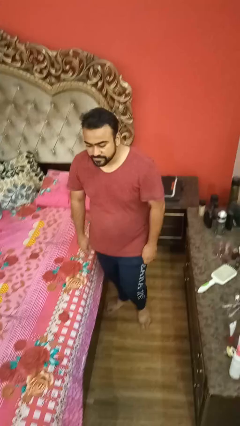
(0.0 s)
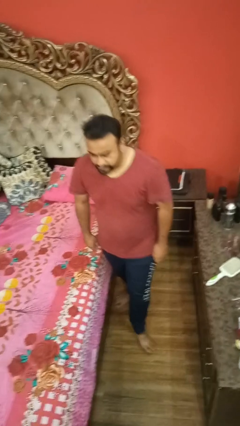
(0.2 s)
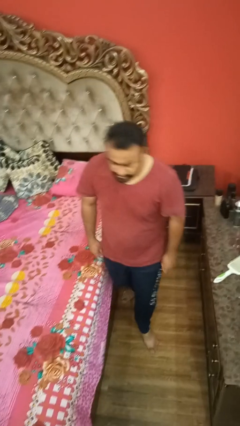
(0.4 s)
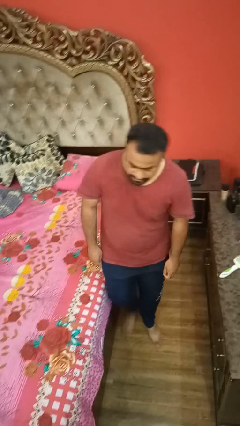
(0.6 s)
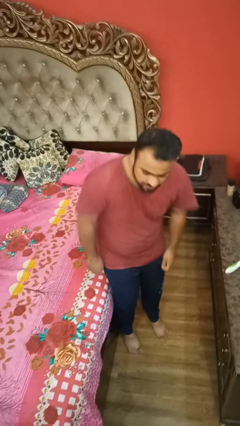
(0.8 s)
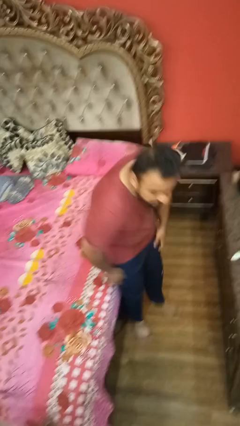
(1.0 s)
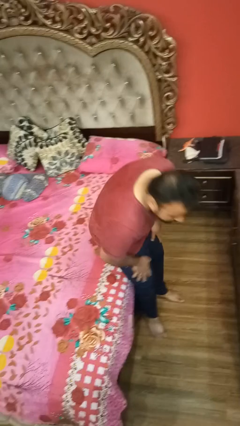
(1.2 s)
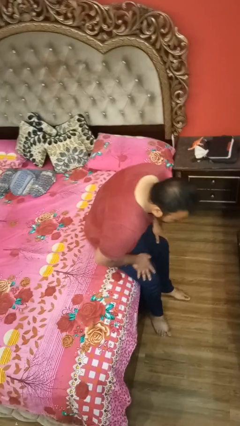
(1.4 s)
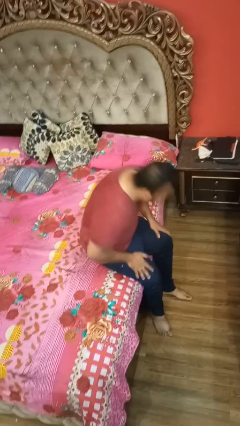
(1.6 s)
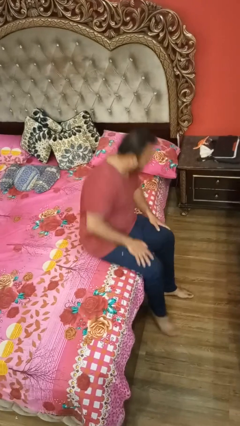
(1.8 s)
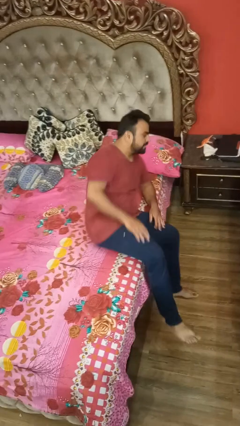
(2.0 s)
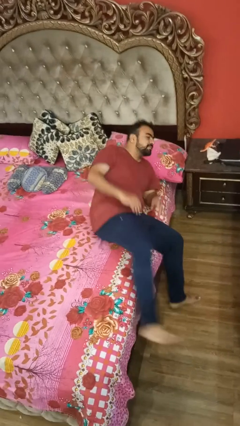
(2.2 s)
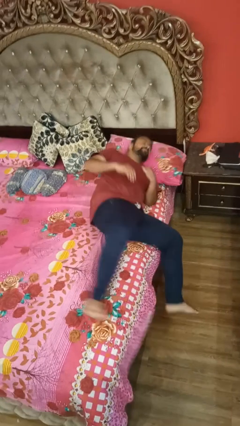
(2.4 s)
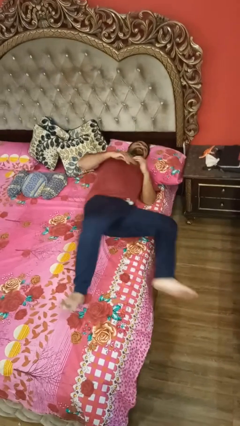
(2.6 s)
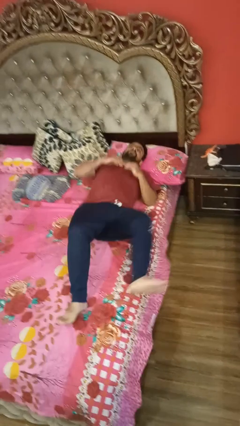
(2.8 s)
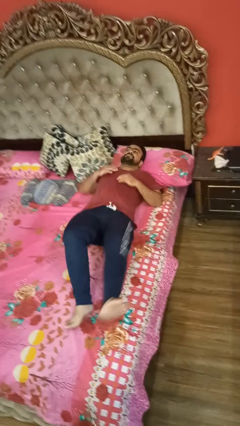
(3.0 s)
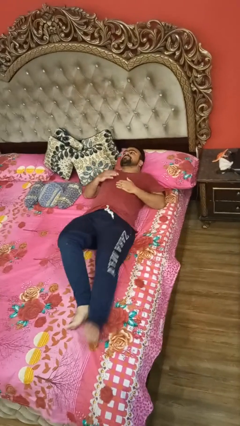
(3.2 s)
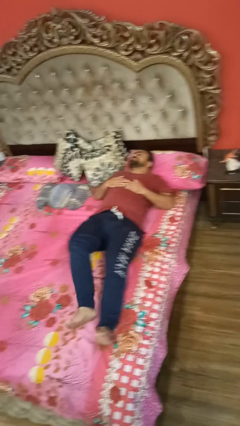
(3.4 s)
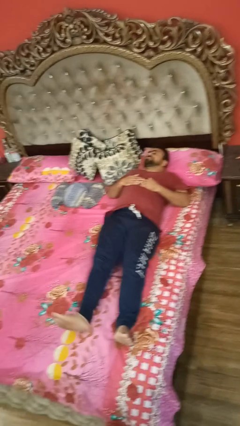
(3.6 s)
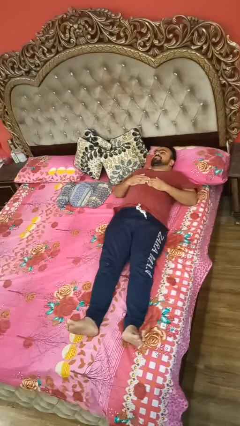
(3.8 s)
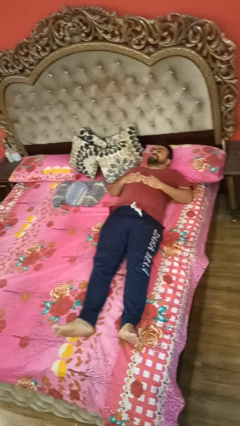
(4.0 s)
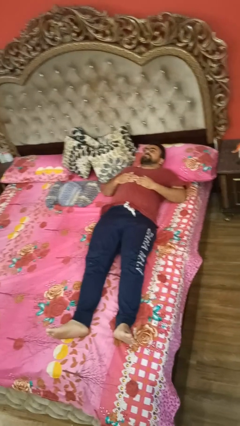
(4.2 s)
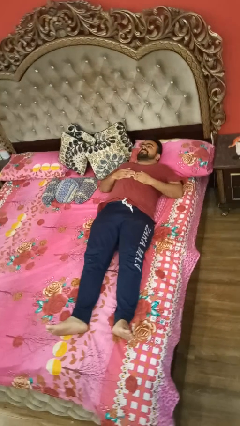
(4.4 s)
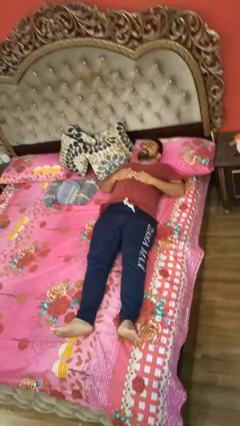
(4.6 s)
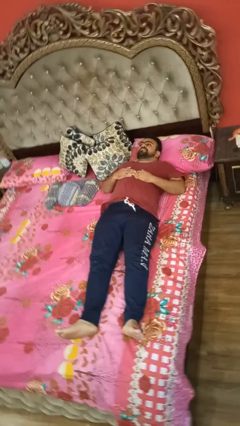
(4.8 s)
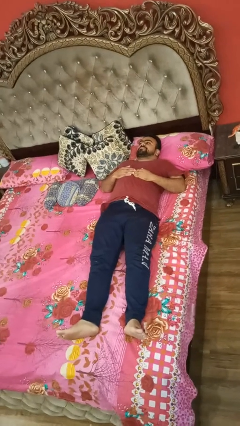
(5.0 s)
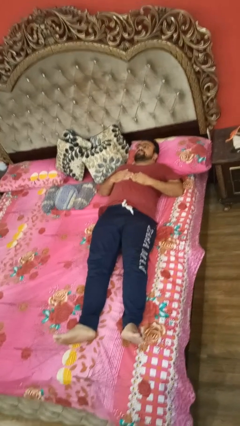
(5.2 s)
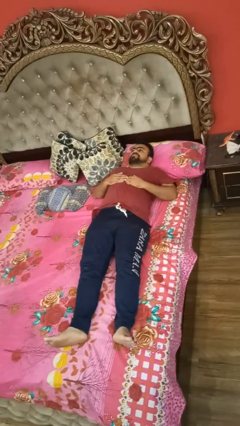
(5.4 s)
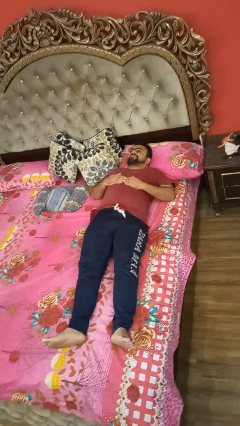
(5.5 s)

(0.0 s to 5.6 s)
person lies down on bed

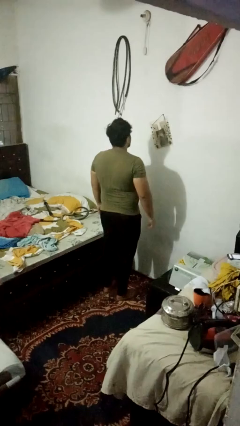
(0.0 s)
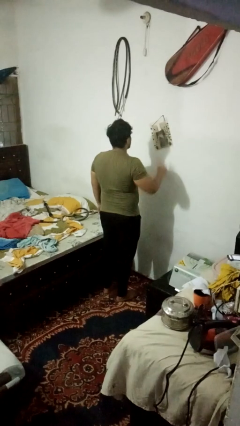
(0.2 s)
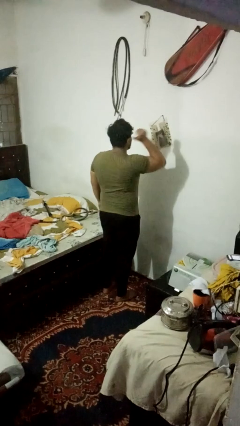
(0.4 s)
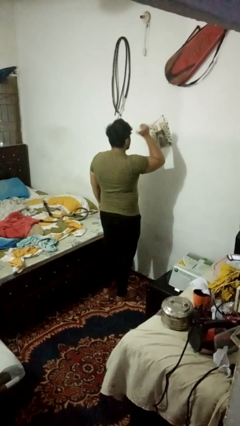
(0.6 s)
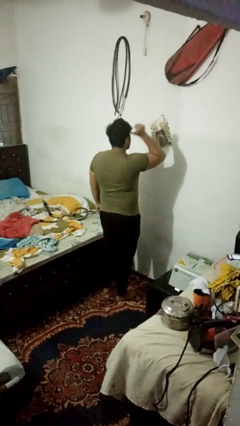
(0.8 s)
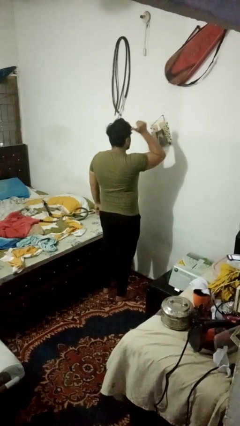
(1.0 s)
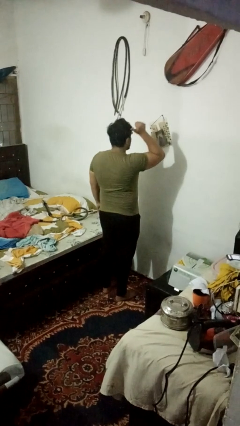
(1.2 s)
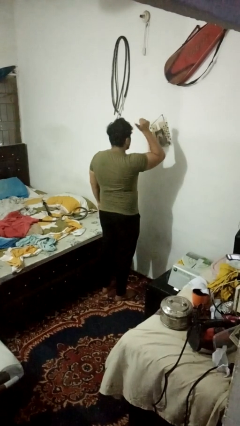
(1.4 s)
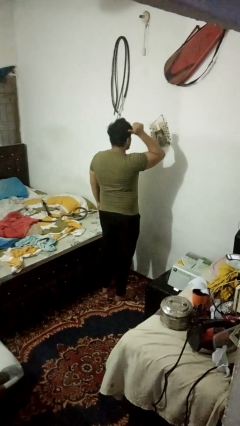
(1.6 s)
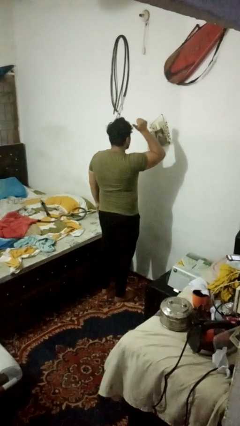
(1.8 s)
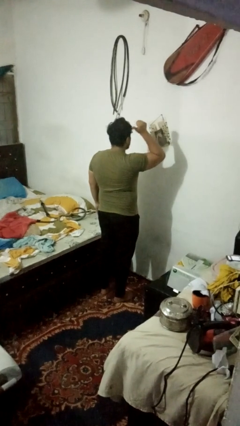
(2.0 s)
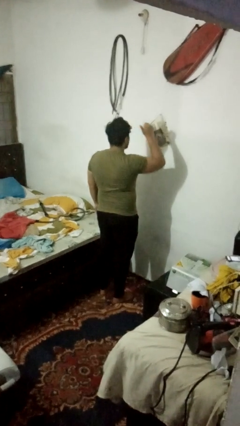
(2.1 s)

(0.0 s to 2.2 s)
person gestures behind me

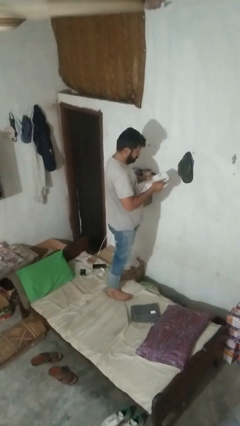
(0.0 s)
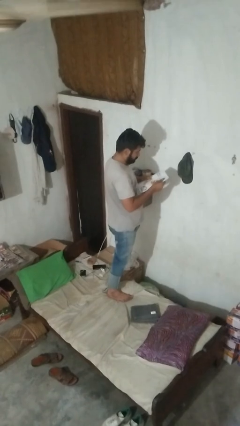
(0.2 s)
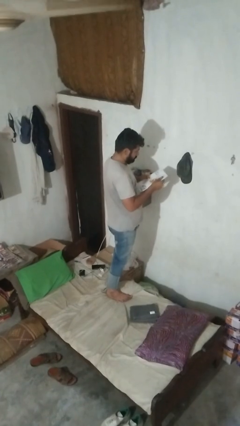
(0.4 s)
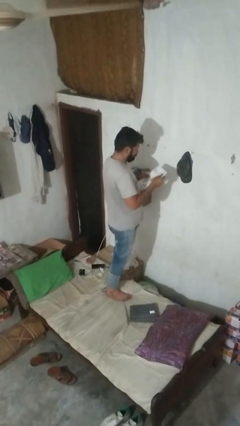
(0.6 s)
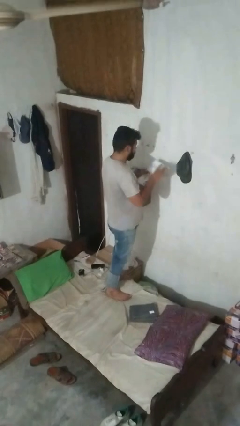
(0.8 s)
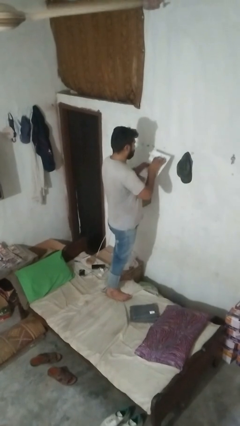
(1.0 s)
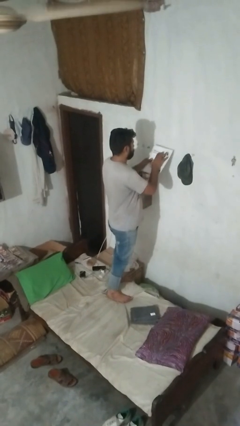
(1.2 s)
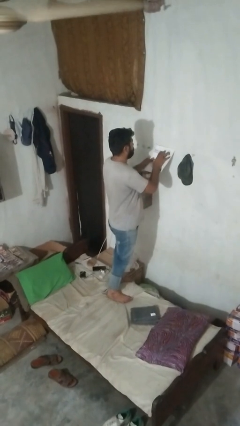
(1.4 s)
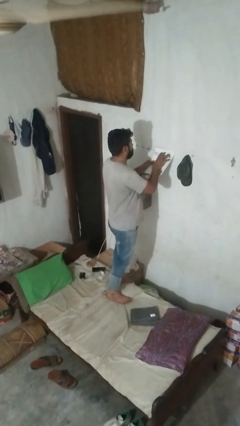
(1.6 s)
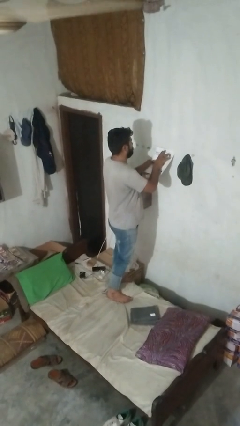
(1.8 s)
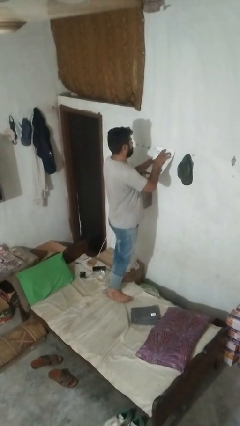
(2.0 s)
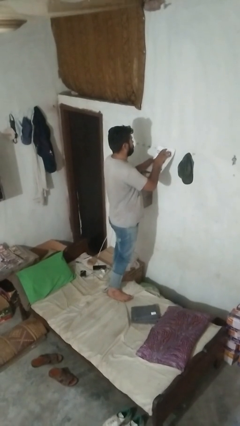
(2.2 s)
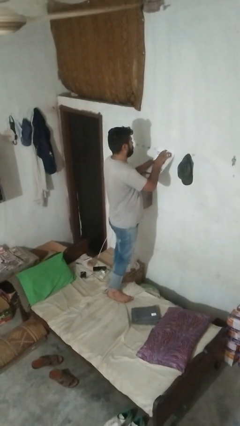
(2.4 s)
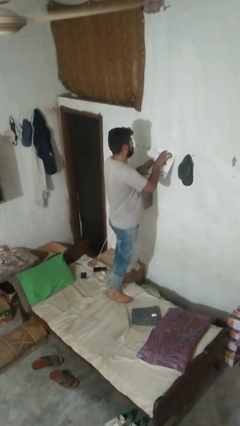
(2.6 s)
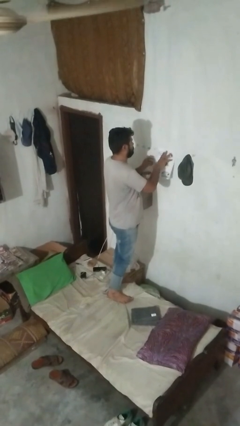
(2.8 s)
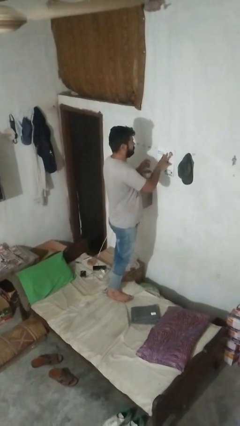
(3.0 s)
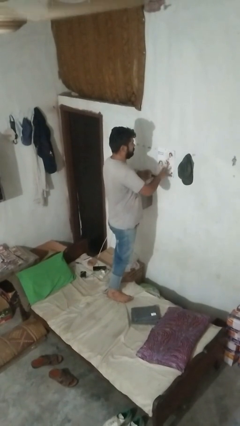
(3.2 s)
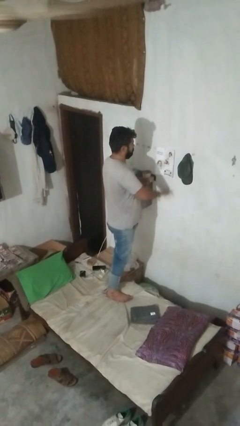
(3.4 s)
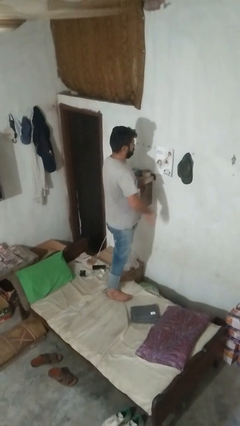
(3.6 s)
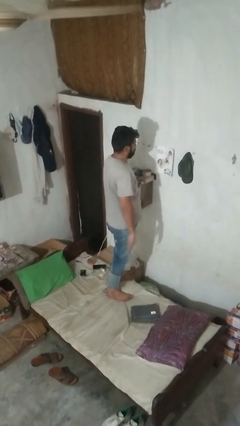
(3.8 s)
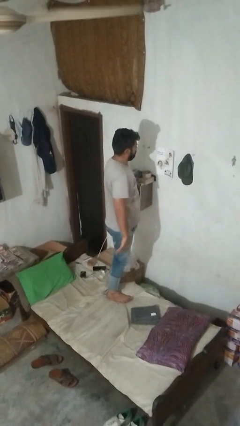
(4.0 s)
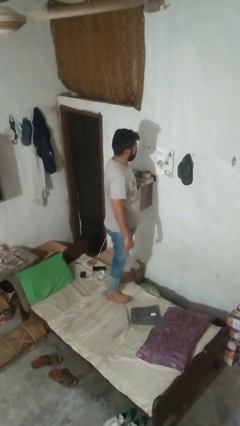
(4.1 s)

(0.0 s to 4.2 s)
person puts up picture frame

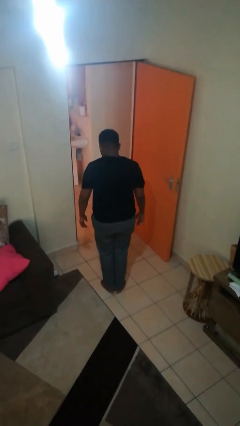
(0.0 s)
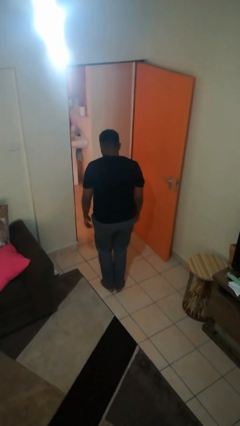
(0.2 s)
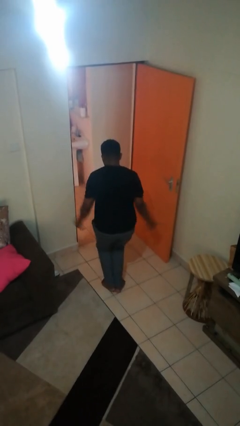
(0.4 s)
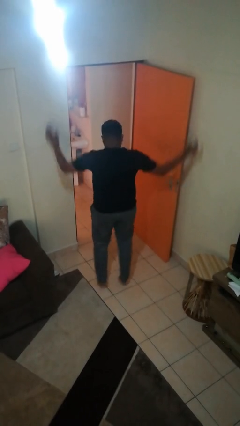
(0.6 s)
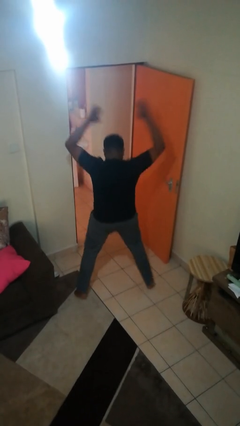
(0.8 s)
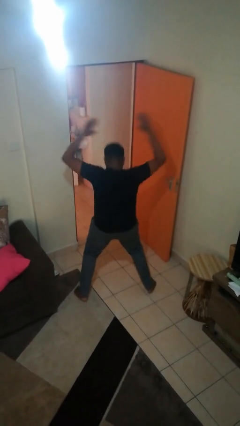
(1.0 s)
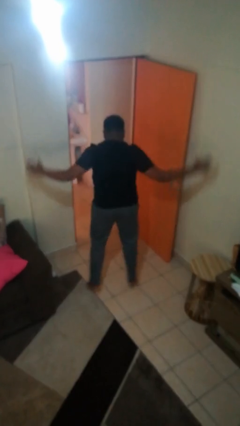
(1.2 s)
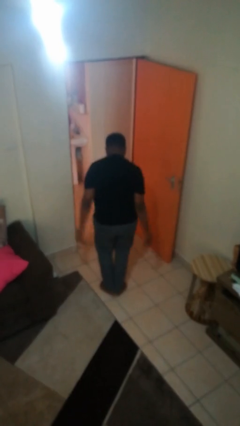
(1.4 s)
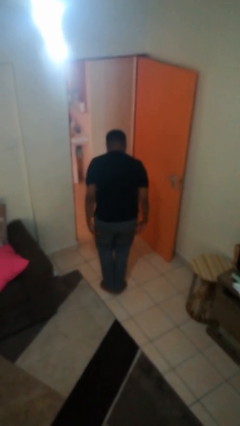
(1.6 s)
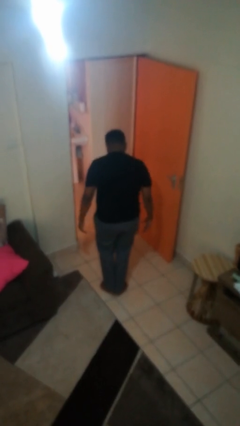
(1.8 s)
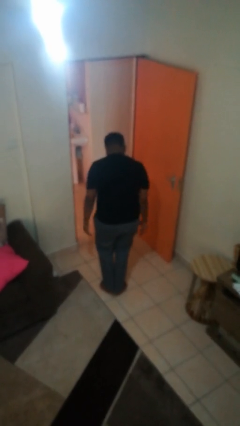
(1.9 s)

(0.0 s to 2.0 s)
person exercises with jumping jacks

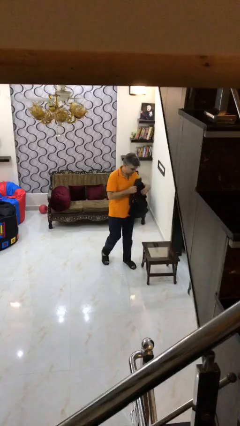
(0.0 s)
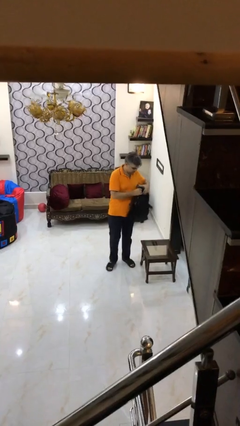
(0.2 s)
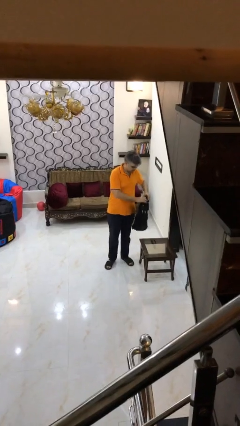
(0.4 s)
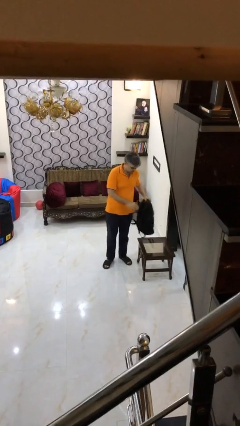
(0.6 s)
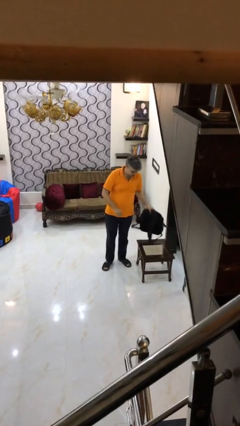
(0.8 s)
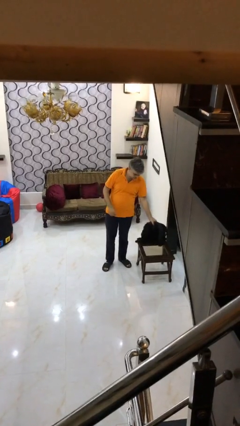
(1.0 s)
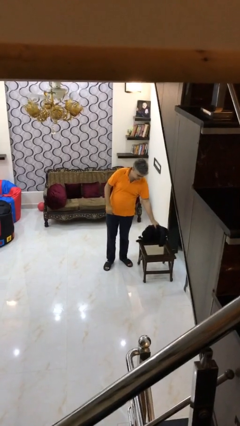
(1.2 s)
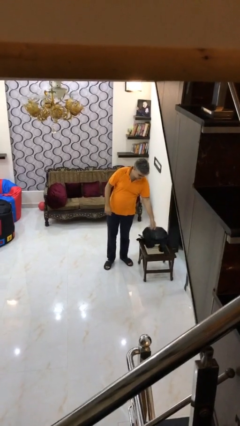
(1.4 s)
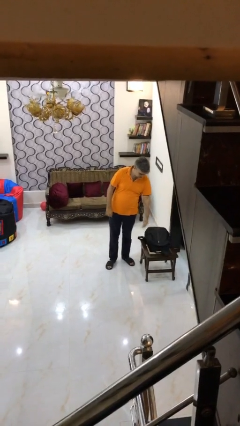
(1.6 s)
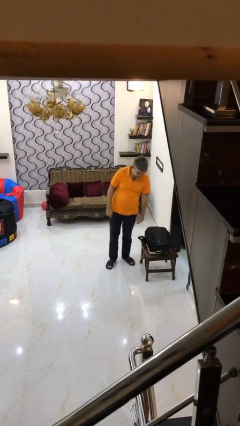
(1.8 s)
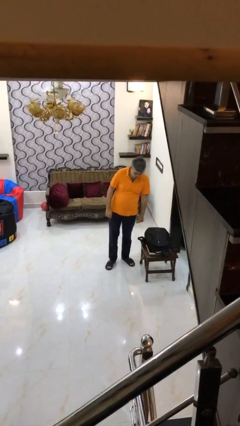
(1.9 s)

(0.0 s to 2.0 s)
person puts down object on table

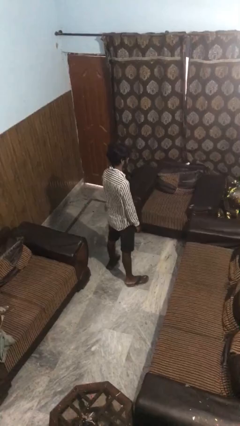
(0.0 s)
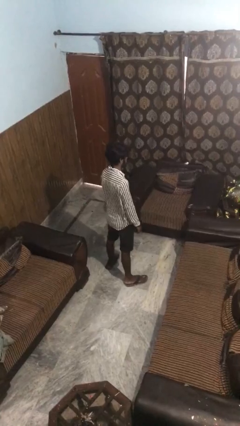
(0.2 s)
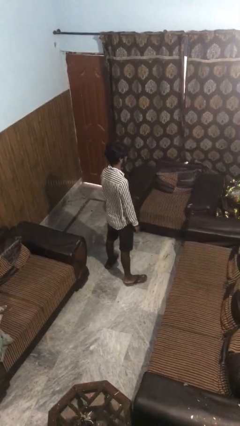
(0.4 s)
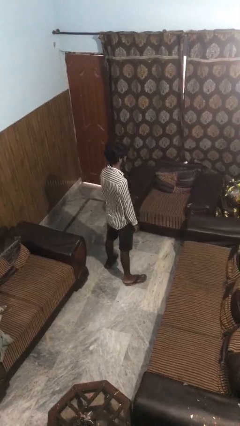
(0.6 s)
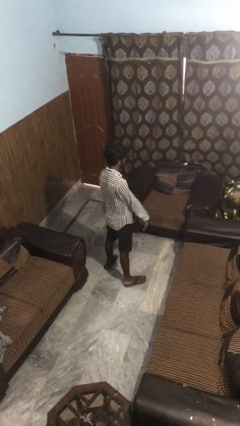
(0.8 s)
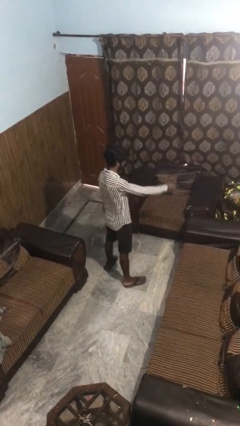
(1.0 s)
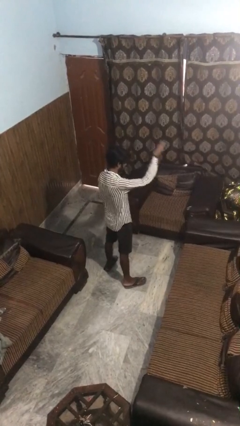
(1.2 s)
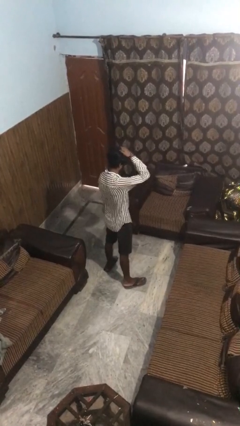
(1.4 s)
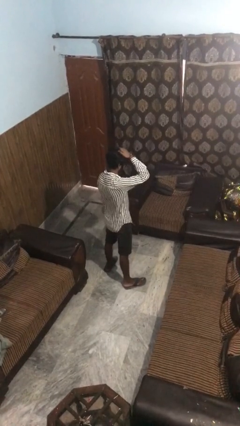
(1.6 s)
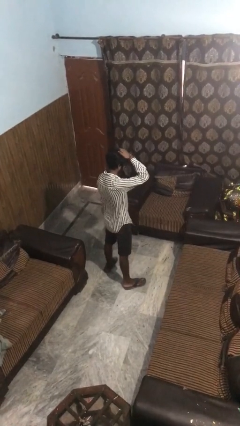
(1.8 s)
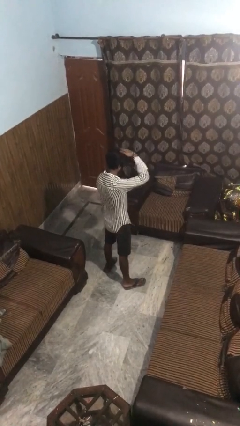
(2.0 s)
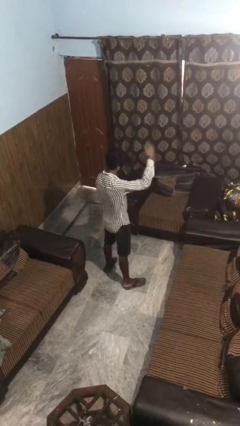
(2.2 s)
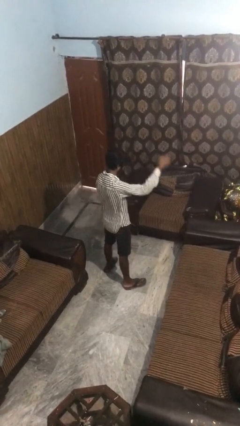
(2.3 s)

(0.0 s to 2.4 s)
person pats head
